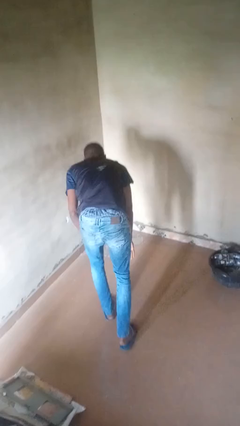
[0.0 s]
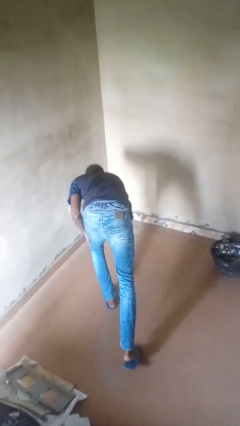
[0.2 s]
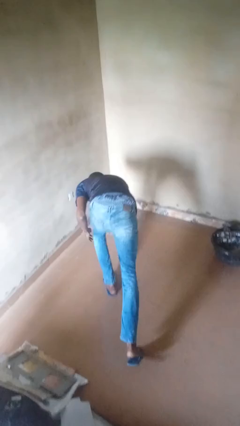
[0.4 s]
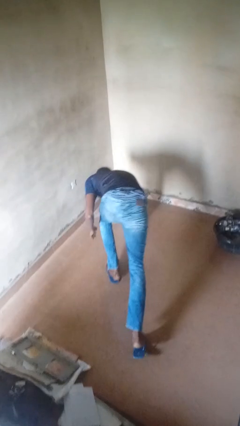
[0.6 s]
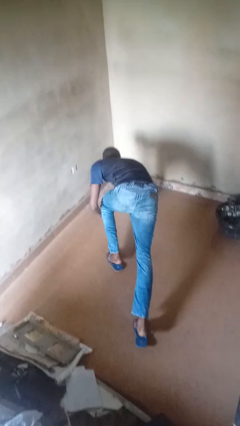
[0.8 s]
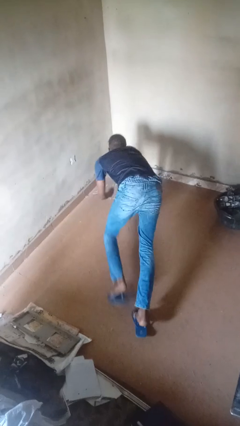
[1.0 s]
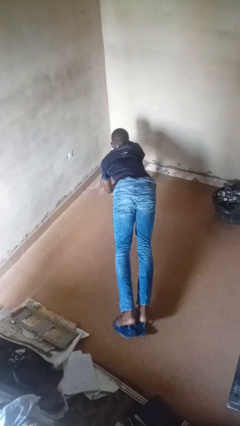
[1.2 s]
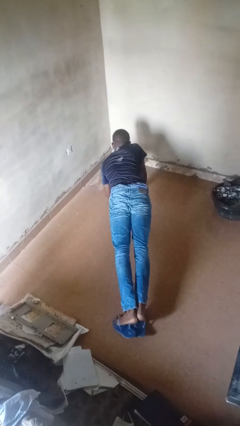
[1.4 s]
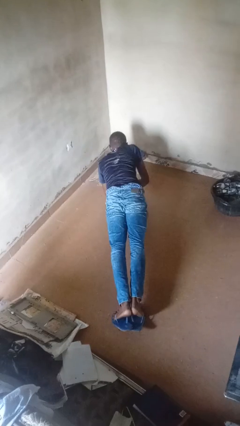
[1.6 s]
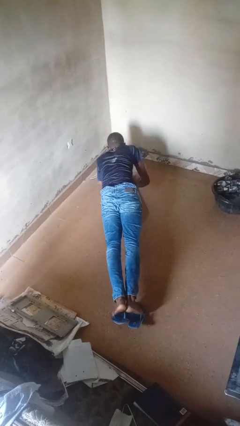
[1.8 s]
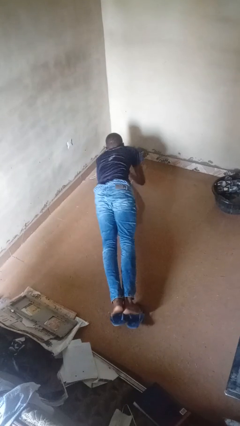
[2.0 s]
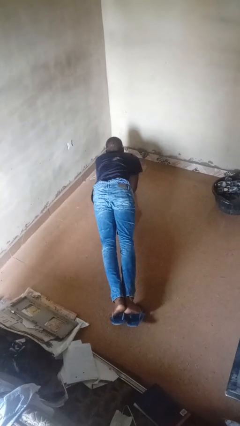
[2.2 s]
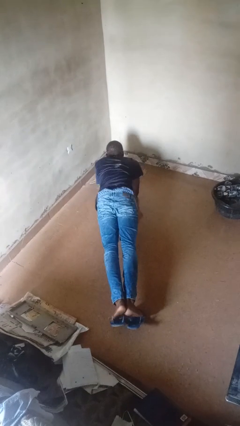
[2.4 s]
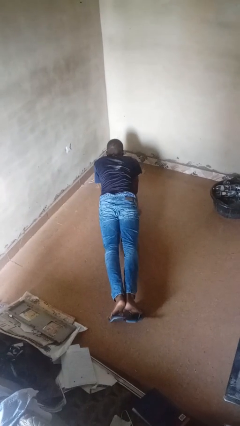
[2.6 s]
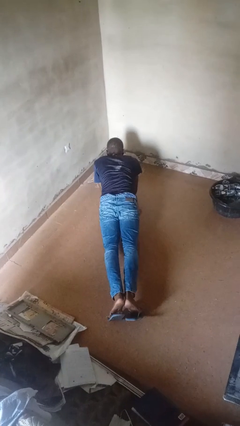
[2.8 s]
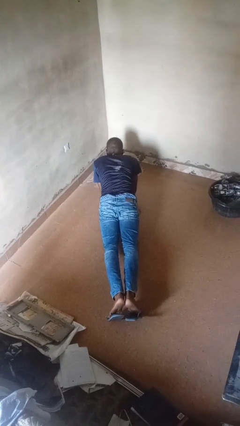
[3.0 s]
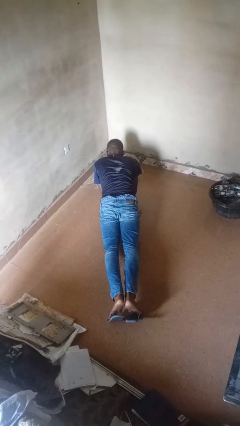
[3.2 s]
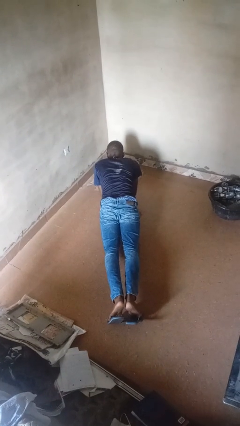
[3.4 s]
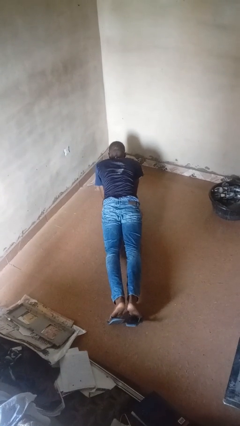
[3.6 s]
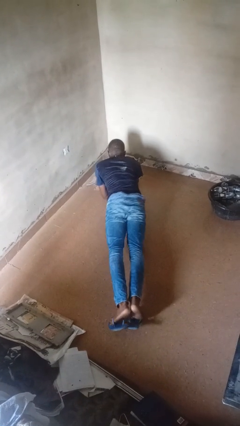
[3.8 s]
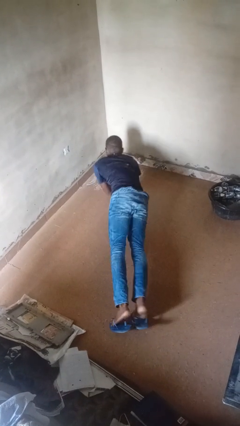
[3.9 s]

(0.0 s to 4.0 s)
person exercises with plank

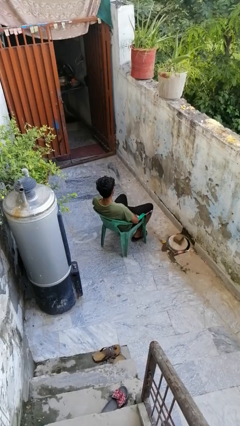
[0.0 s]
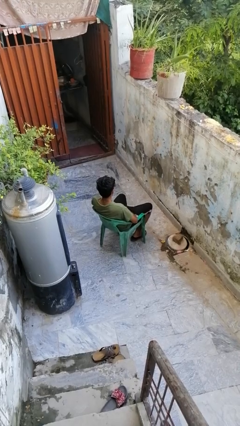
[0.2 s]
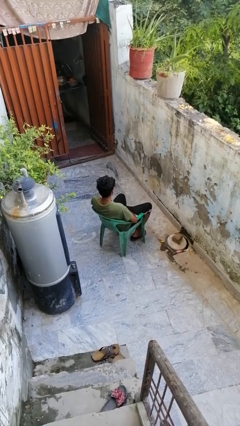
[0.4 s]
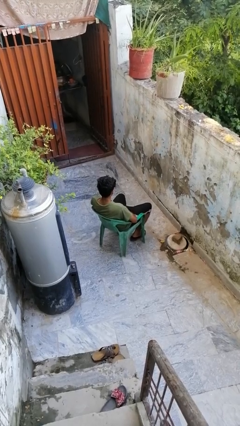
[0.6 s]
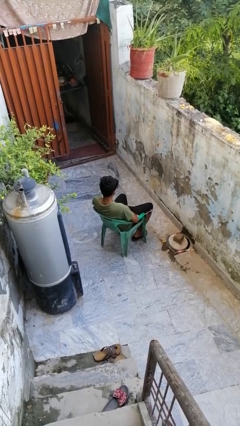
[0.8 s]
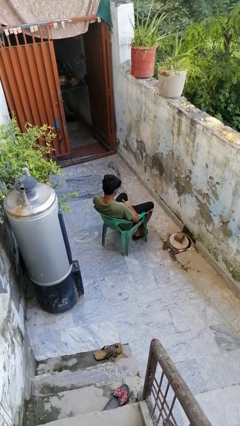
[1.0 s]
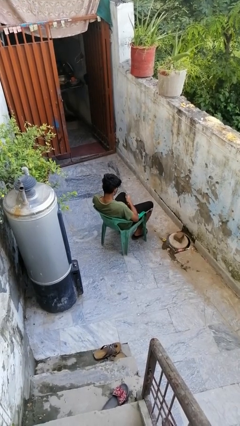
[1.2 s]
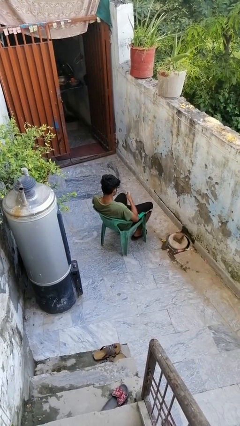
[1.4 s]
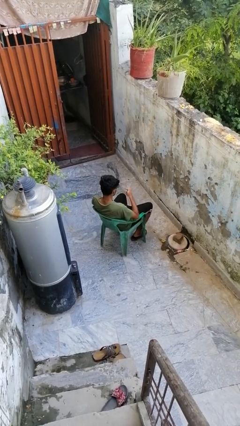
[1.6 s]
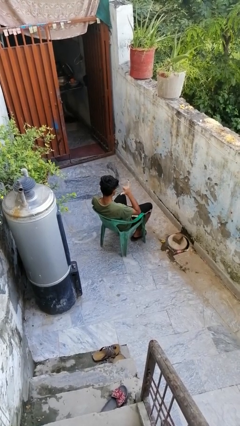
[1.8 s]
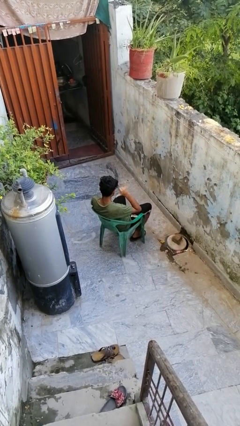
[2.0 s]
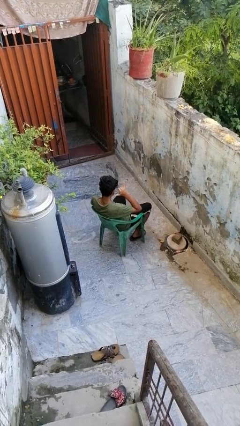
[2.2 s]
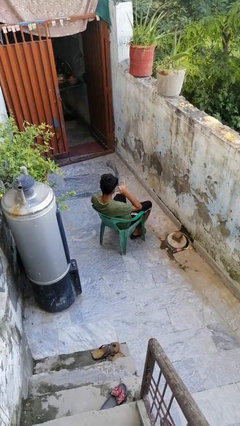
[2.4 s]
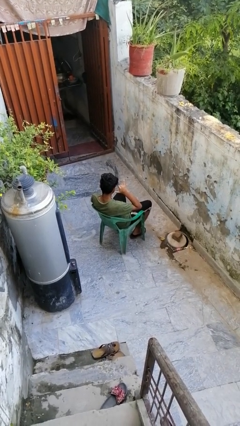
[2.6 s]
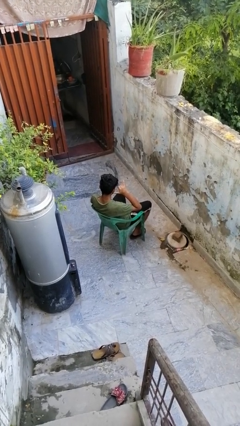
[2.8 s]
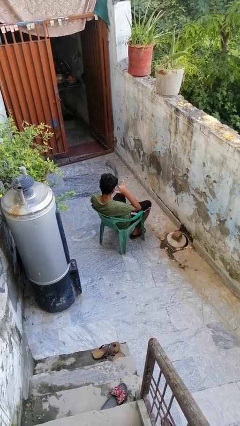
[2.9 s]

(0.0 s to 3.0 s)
person gestures call me

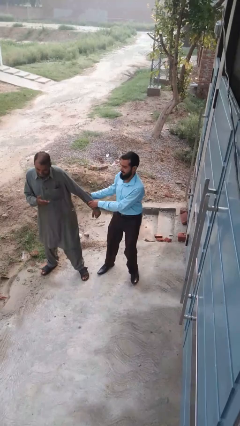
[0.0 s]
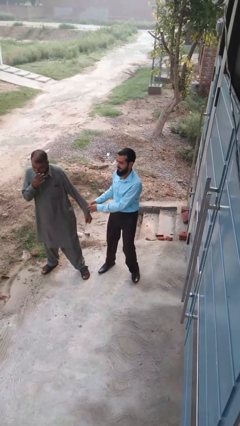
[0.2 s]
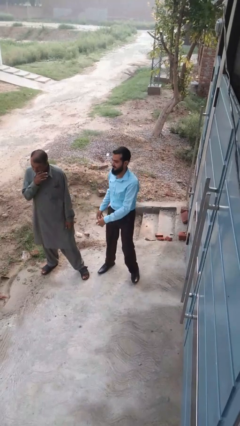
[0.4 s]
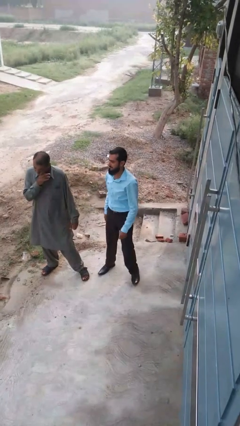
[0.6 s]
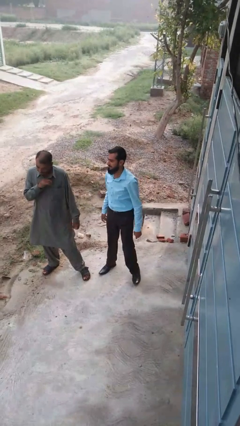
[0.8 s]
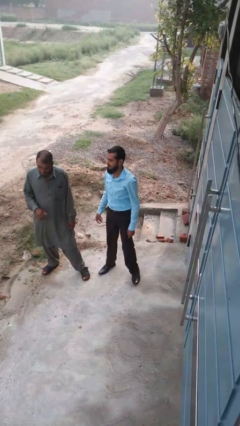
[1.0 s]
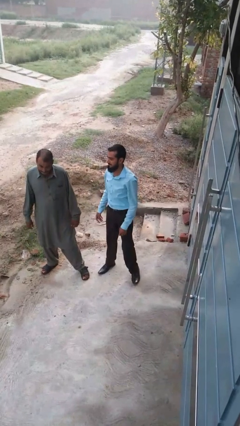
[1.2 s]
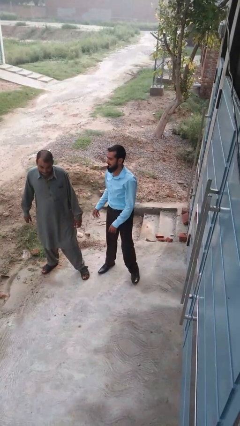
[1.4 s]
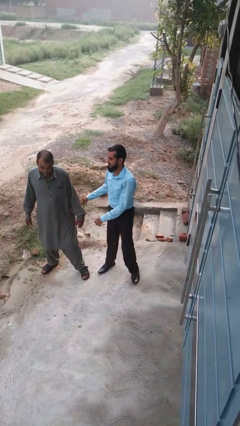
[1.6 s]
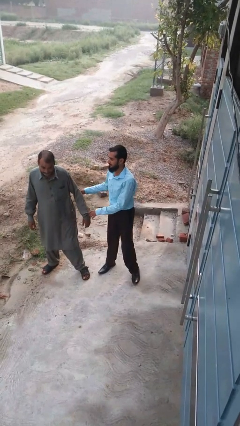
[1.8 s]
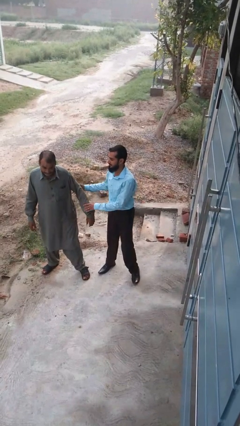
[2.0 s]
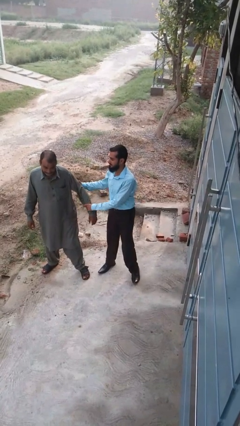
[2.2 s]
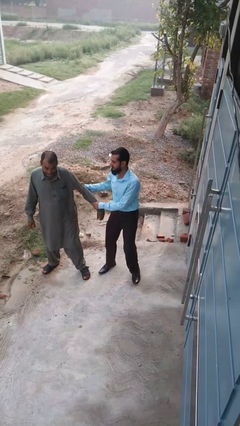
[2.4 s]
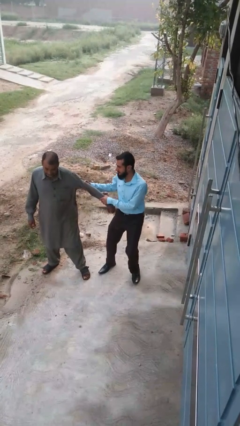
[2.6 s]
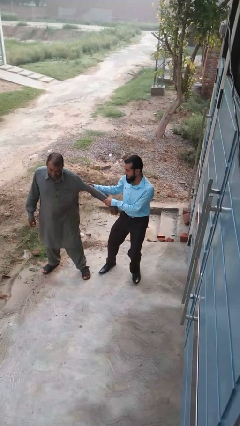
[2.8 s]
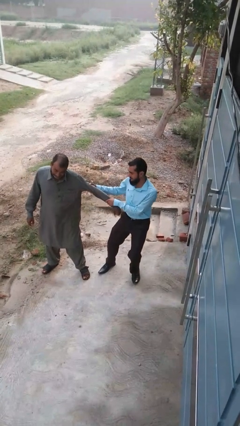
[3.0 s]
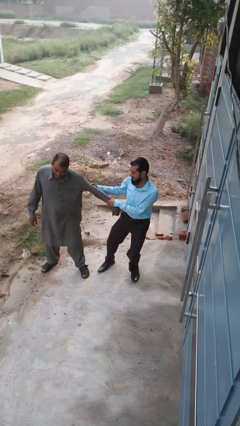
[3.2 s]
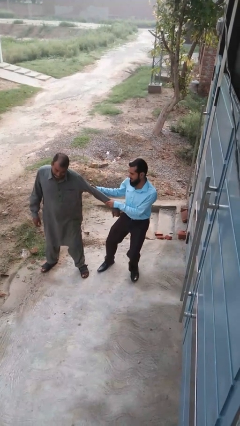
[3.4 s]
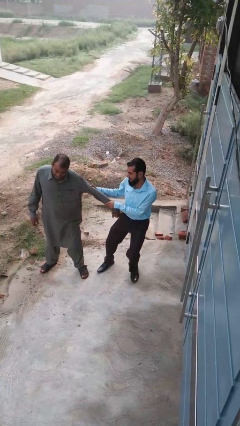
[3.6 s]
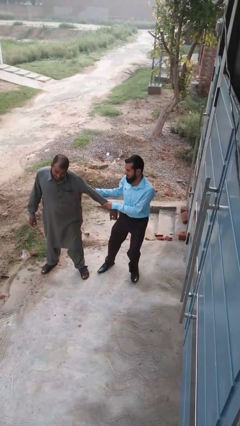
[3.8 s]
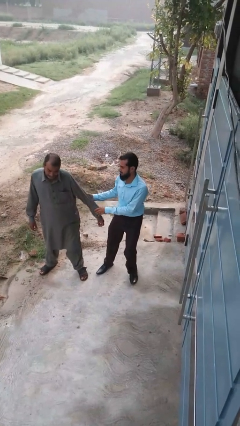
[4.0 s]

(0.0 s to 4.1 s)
person grabs person by forearm

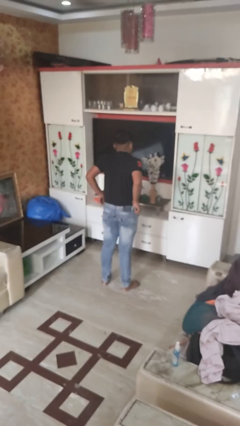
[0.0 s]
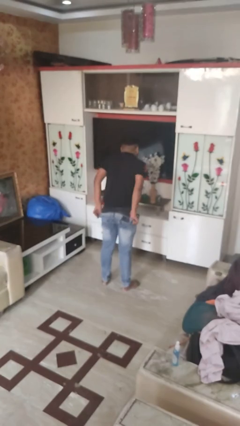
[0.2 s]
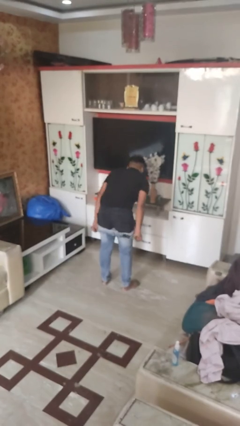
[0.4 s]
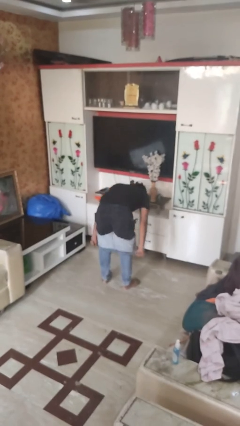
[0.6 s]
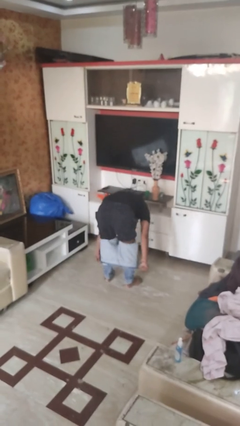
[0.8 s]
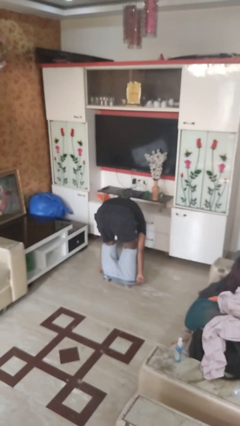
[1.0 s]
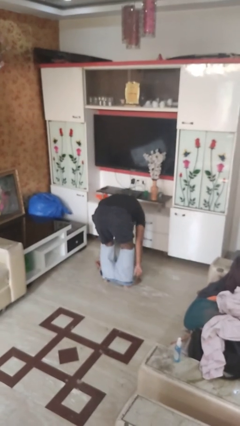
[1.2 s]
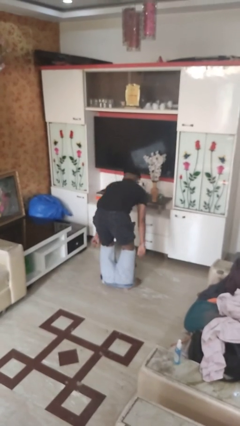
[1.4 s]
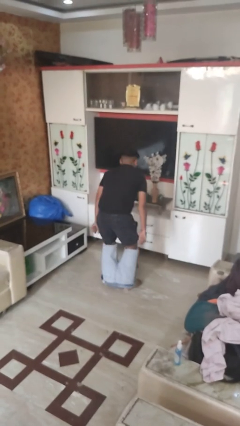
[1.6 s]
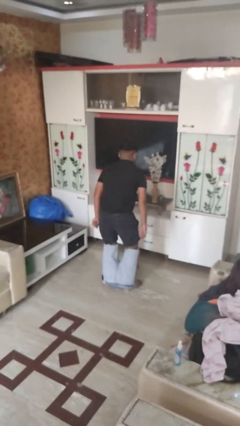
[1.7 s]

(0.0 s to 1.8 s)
person takes off pants

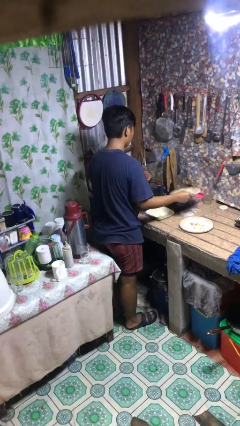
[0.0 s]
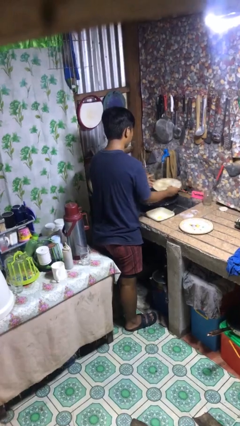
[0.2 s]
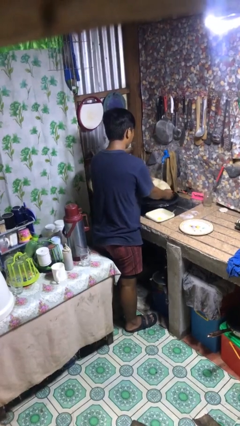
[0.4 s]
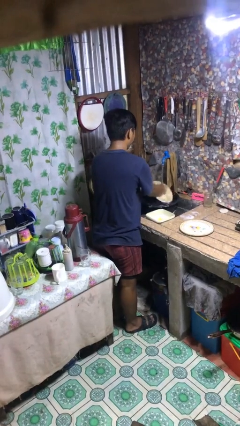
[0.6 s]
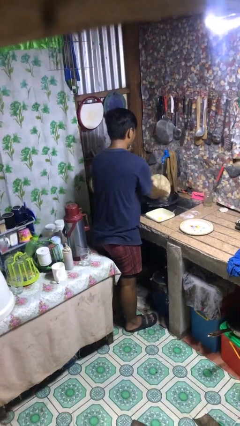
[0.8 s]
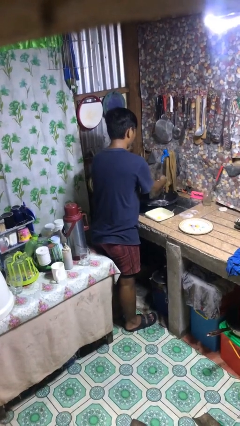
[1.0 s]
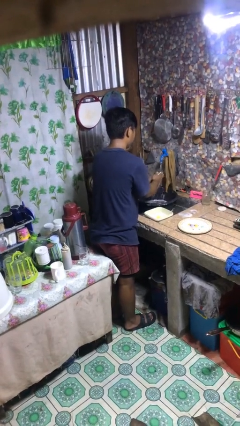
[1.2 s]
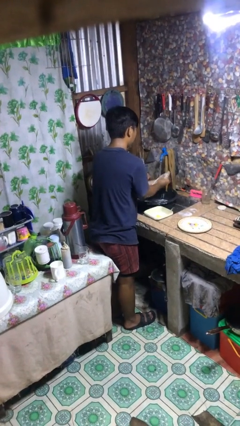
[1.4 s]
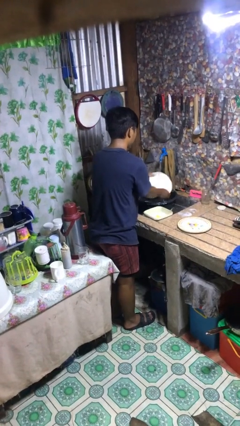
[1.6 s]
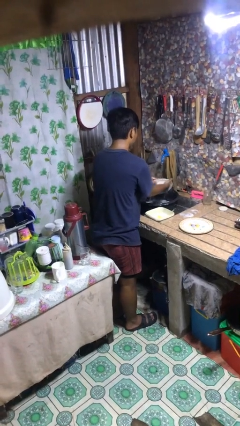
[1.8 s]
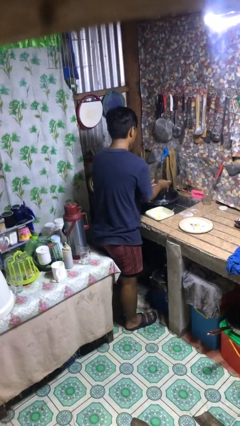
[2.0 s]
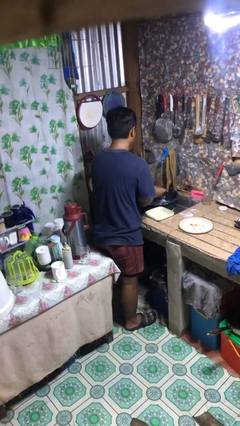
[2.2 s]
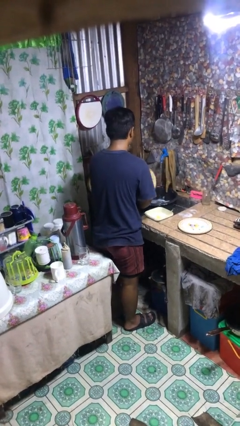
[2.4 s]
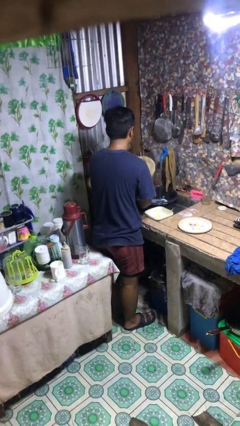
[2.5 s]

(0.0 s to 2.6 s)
person washes dish

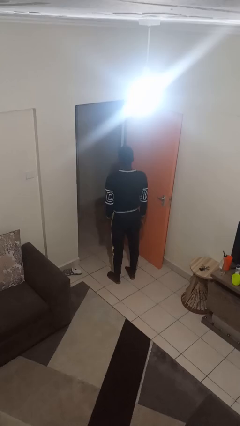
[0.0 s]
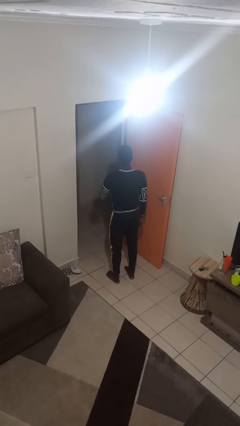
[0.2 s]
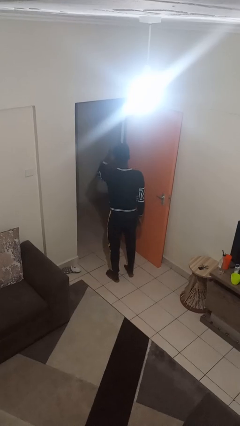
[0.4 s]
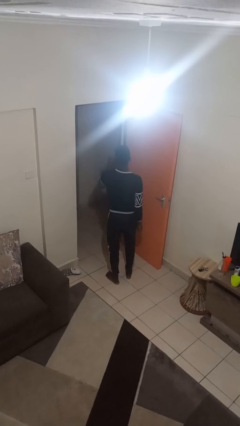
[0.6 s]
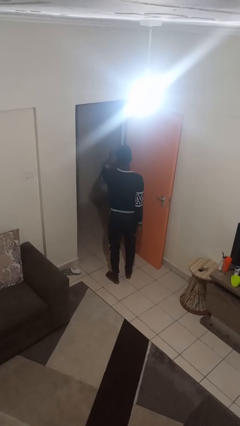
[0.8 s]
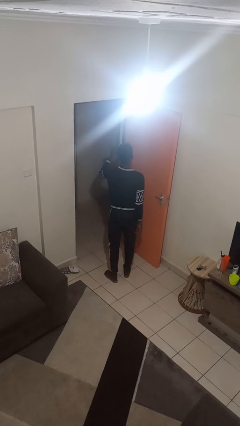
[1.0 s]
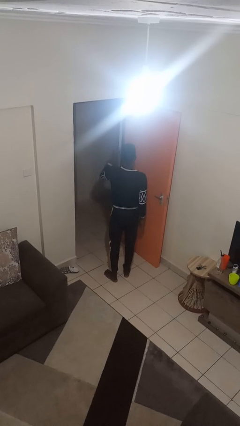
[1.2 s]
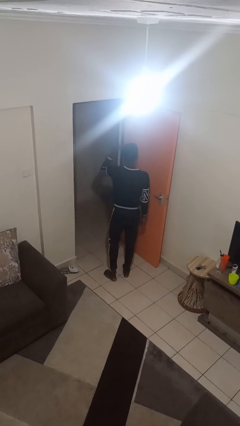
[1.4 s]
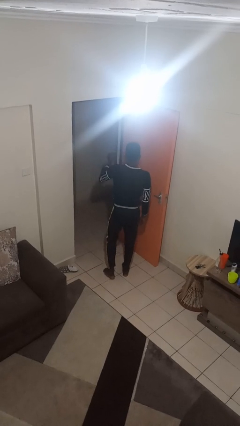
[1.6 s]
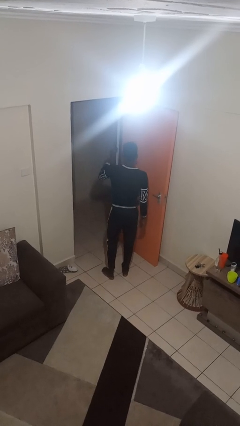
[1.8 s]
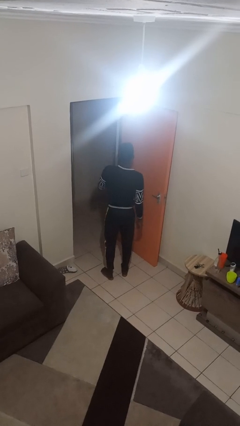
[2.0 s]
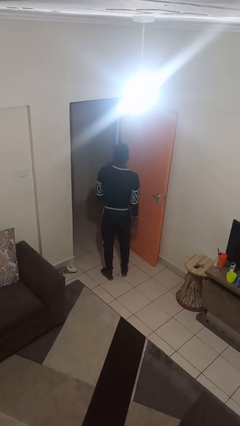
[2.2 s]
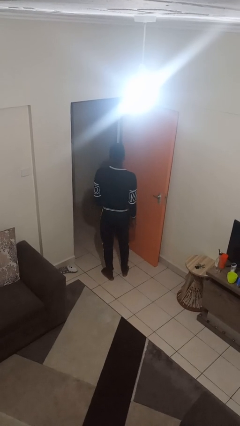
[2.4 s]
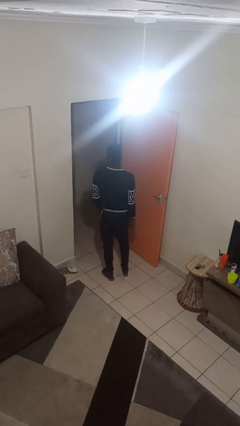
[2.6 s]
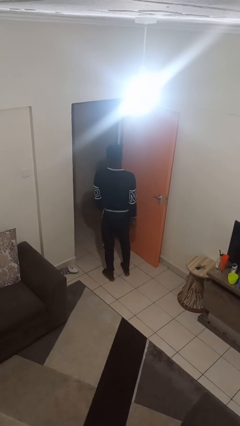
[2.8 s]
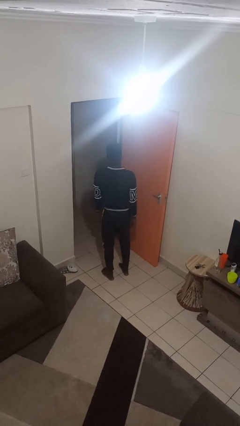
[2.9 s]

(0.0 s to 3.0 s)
person snaps fingers
